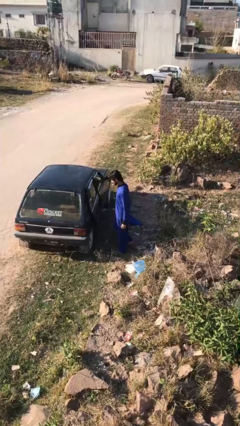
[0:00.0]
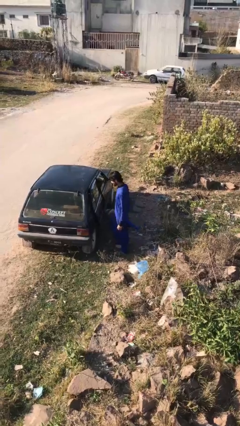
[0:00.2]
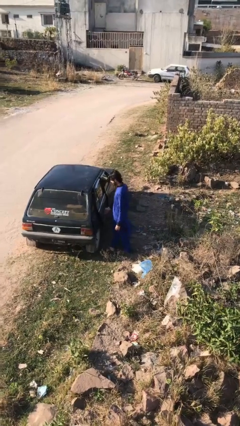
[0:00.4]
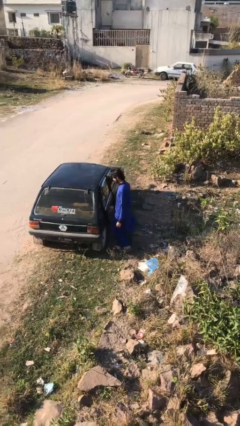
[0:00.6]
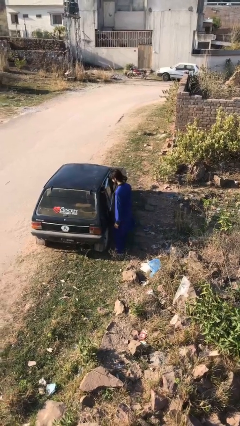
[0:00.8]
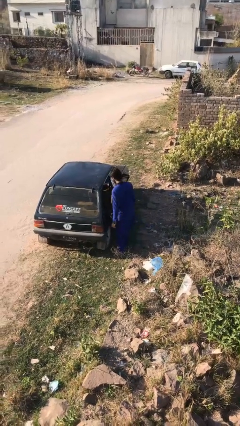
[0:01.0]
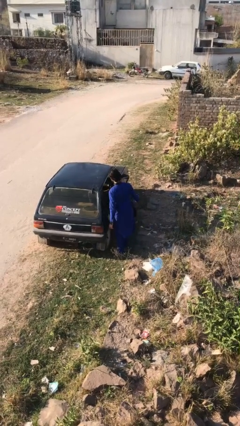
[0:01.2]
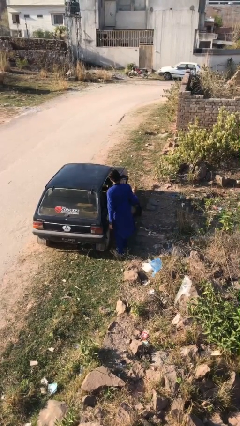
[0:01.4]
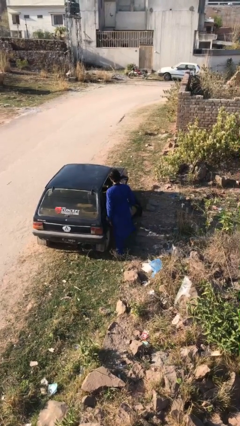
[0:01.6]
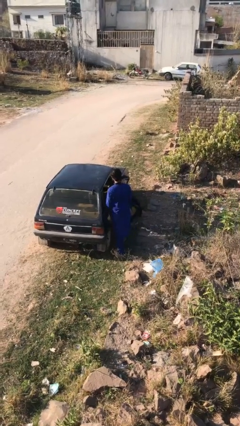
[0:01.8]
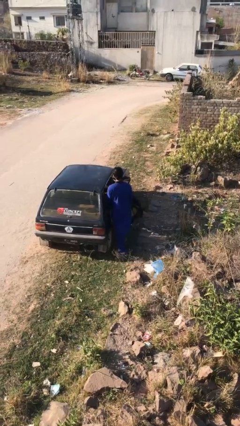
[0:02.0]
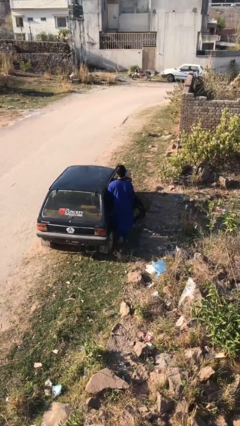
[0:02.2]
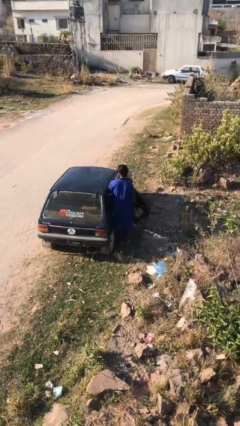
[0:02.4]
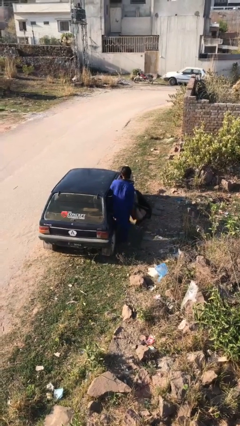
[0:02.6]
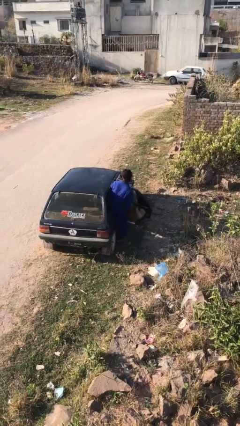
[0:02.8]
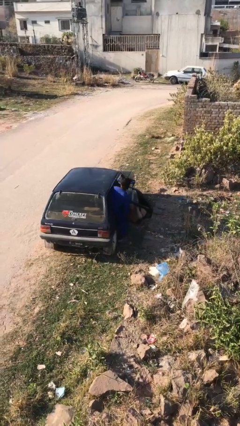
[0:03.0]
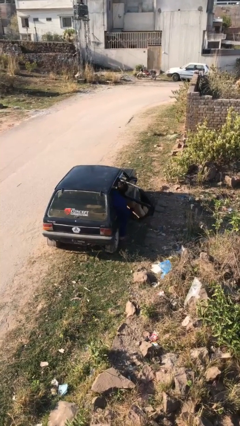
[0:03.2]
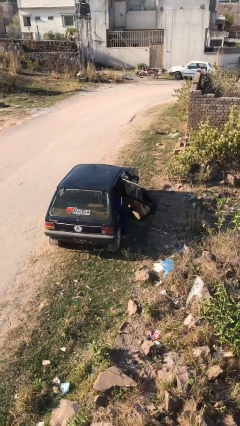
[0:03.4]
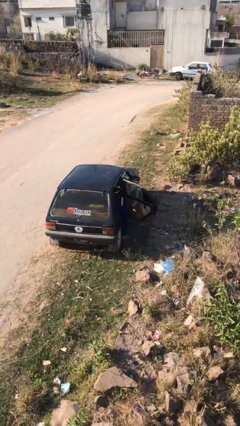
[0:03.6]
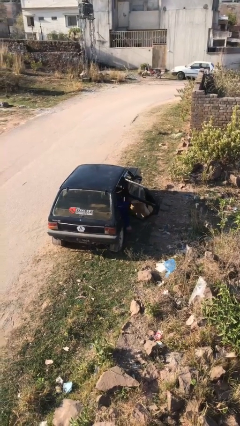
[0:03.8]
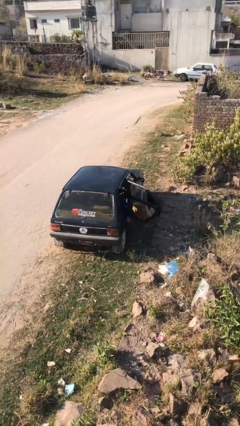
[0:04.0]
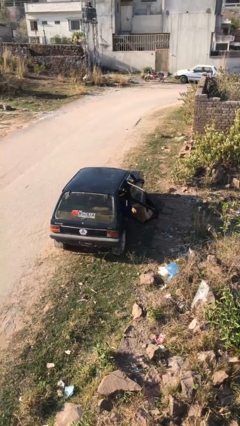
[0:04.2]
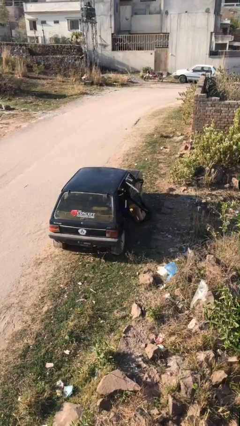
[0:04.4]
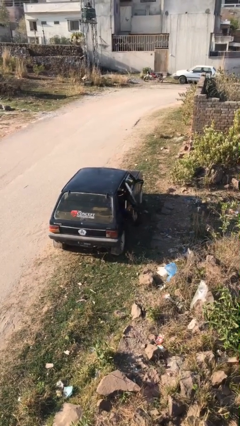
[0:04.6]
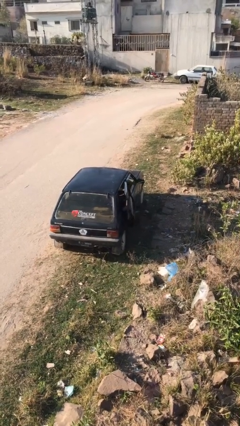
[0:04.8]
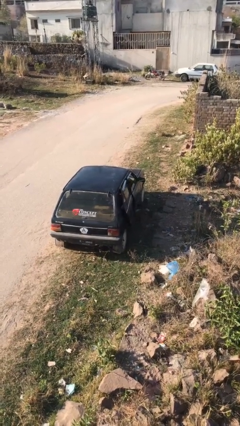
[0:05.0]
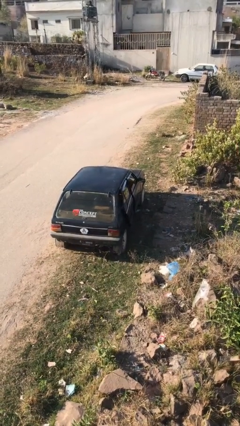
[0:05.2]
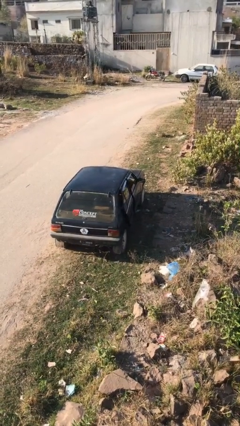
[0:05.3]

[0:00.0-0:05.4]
car picks up person

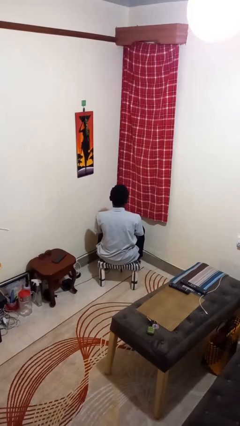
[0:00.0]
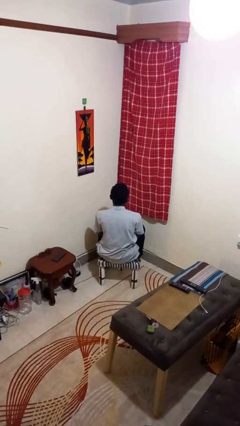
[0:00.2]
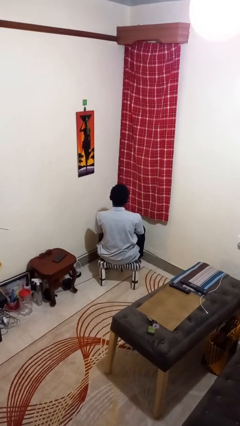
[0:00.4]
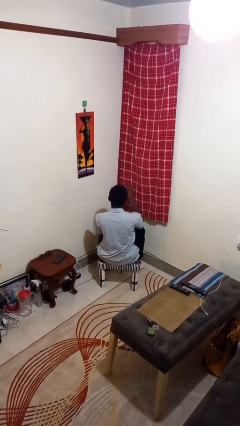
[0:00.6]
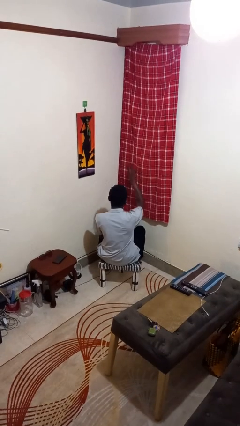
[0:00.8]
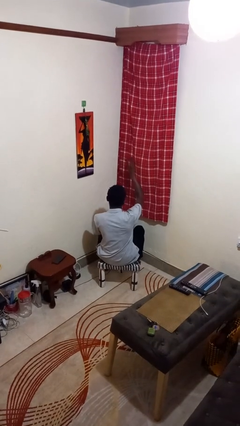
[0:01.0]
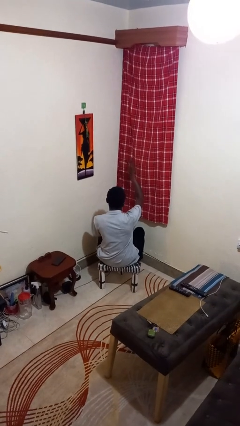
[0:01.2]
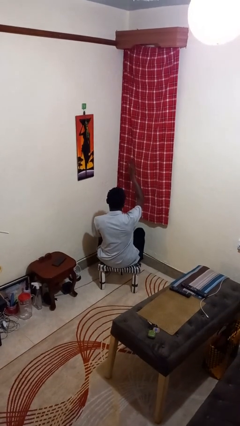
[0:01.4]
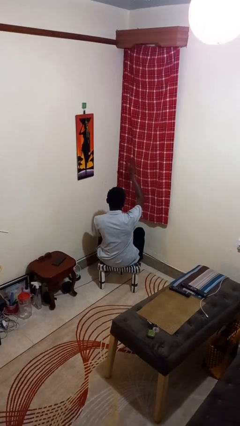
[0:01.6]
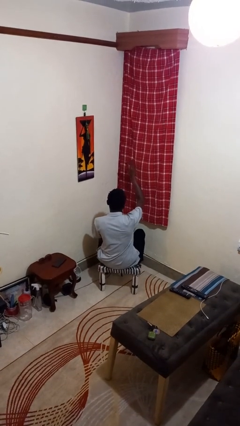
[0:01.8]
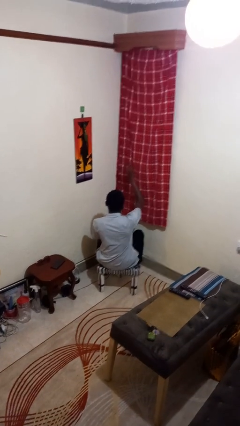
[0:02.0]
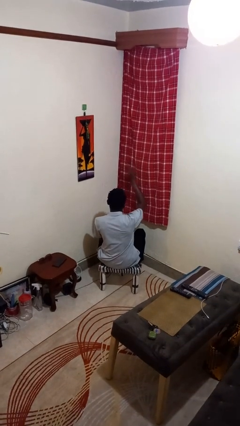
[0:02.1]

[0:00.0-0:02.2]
person gestures peace

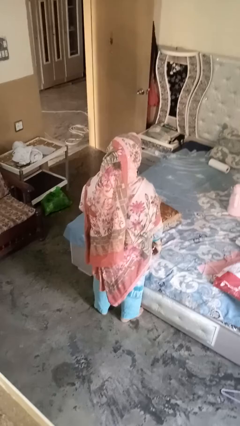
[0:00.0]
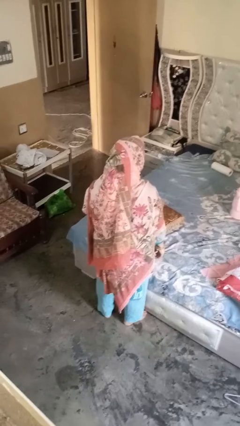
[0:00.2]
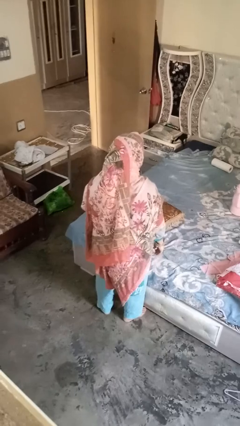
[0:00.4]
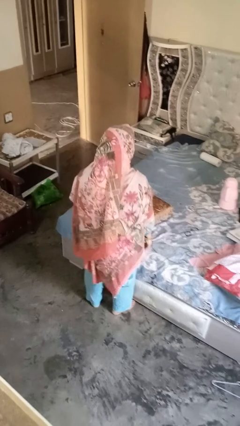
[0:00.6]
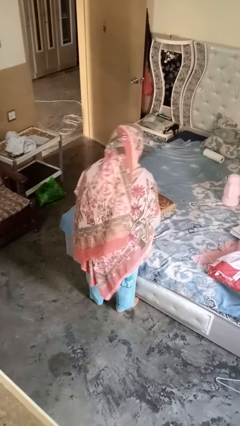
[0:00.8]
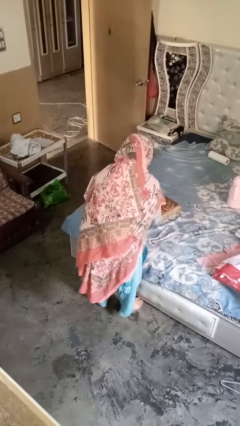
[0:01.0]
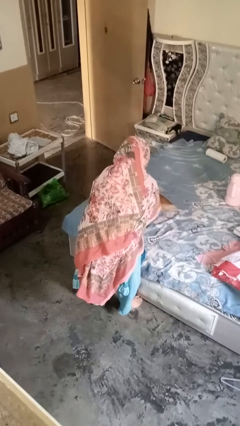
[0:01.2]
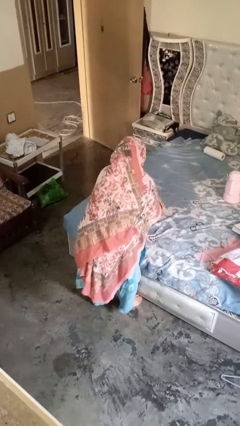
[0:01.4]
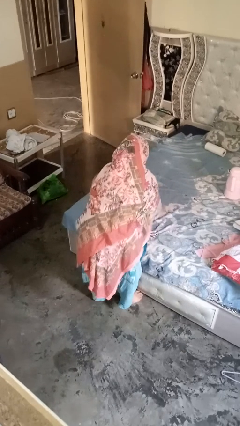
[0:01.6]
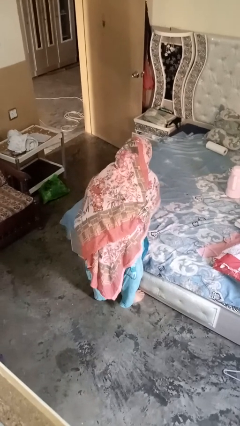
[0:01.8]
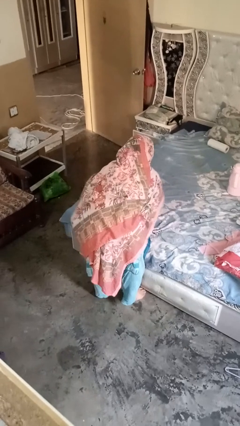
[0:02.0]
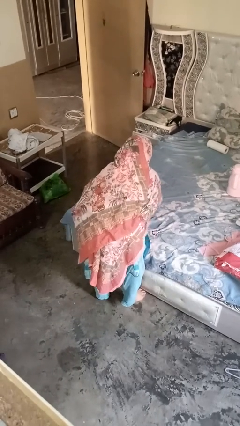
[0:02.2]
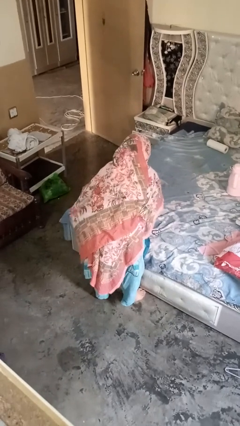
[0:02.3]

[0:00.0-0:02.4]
person searches under bed

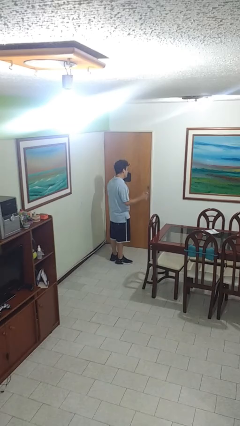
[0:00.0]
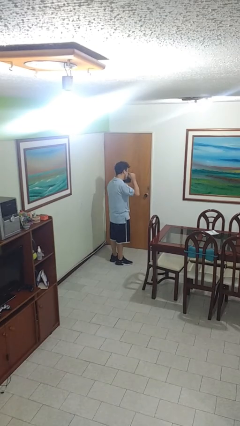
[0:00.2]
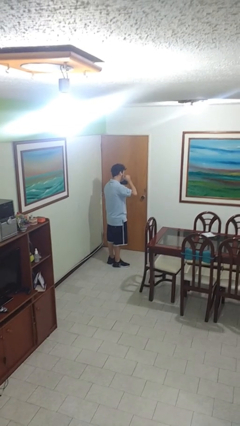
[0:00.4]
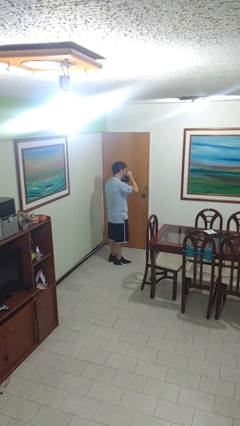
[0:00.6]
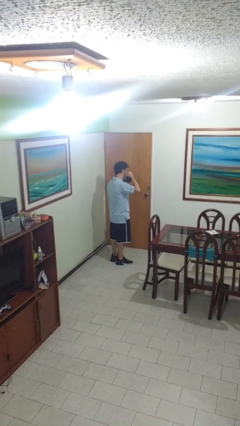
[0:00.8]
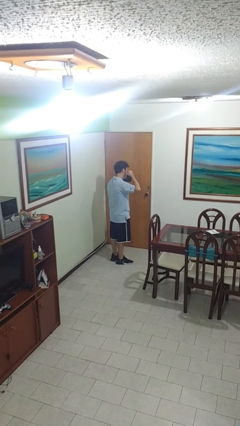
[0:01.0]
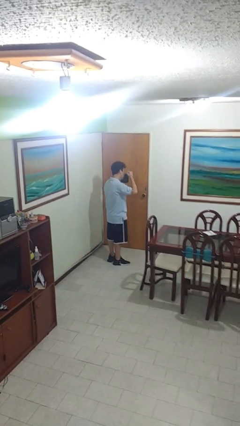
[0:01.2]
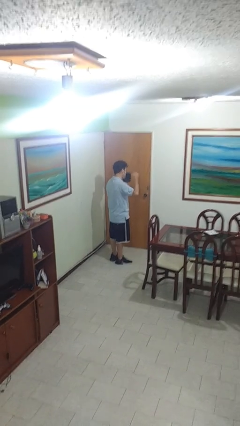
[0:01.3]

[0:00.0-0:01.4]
person gestures listen closely

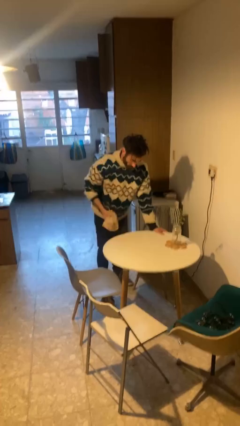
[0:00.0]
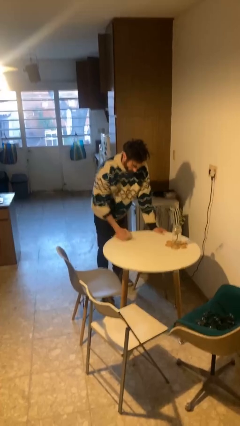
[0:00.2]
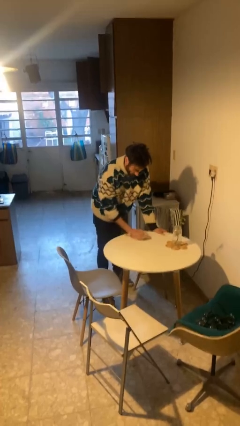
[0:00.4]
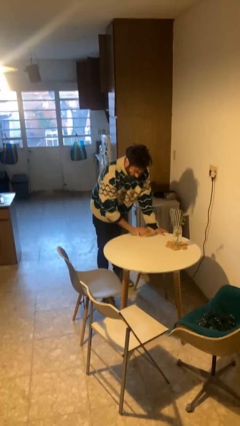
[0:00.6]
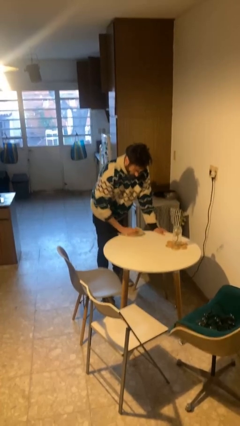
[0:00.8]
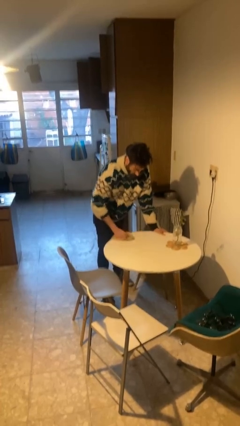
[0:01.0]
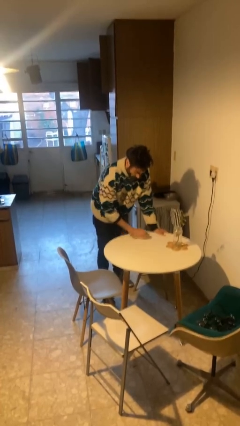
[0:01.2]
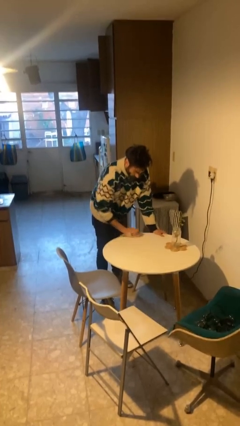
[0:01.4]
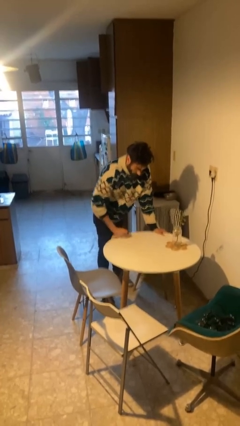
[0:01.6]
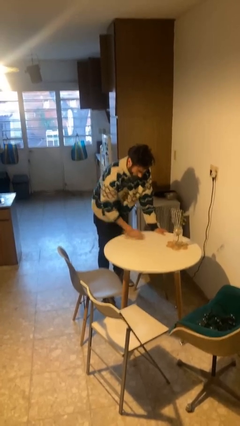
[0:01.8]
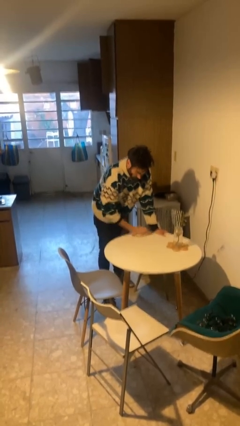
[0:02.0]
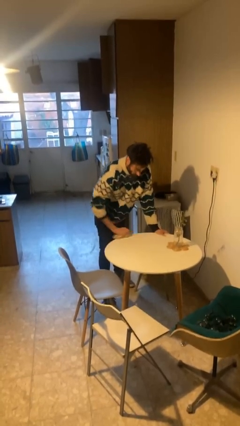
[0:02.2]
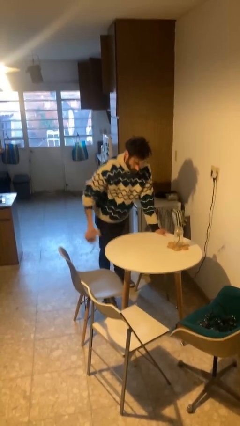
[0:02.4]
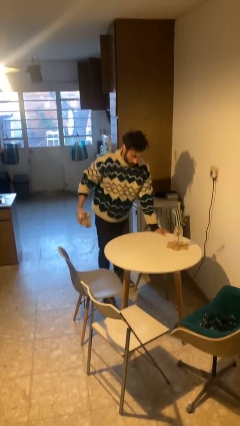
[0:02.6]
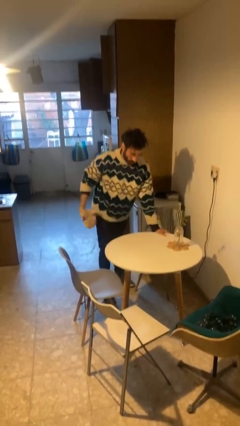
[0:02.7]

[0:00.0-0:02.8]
person cleans table with rag

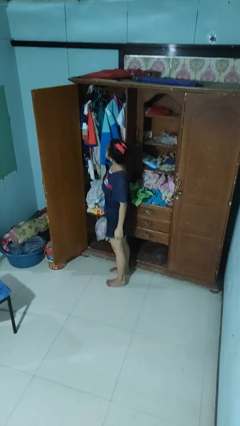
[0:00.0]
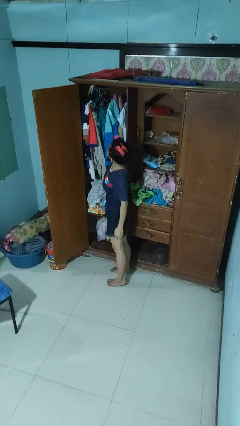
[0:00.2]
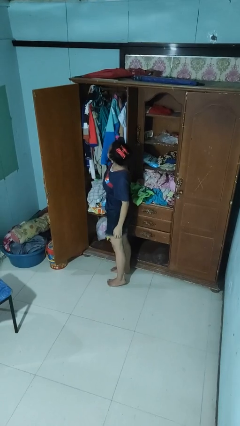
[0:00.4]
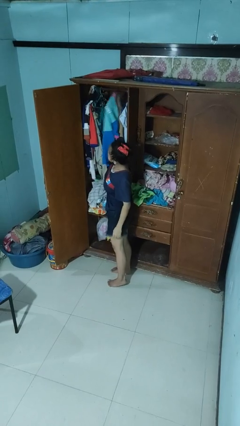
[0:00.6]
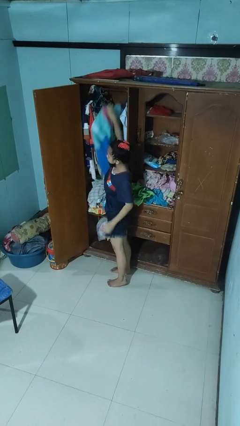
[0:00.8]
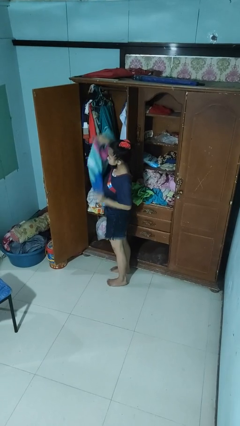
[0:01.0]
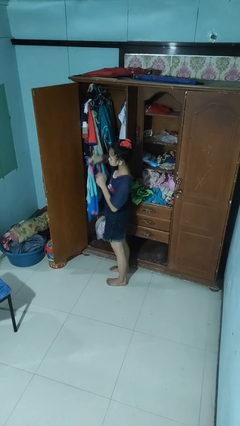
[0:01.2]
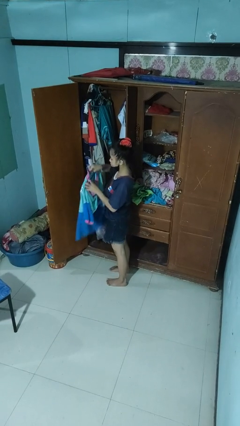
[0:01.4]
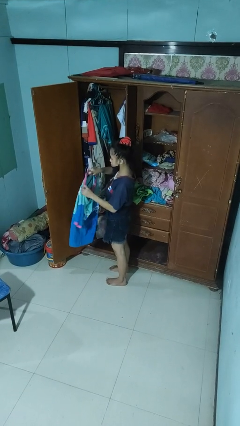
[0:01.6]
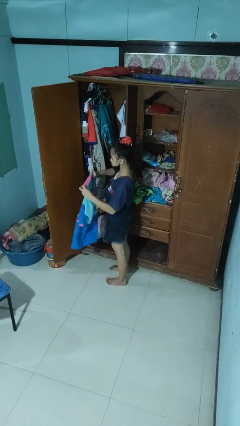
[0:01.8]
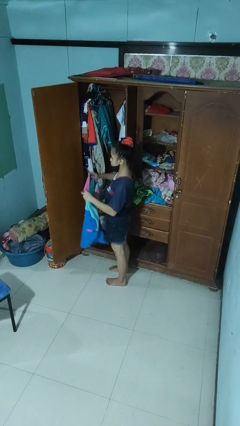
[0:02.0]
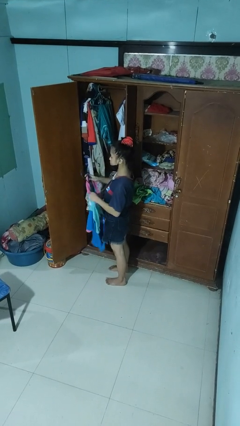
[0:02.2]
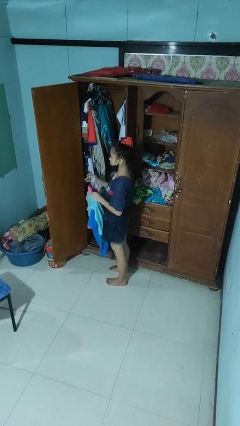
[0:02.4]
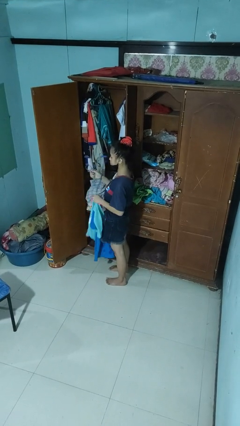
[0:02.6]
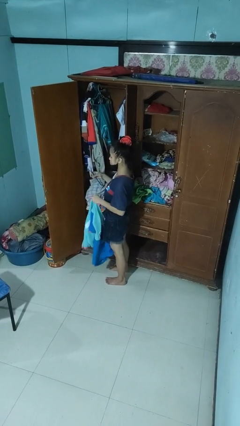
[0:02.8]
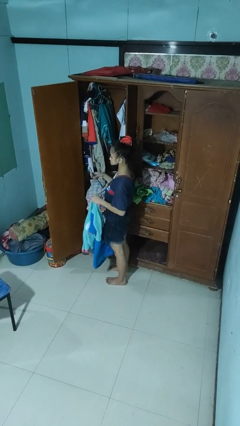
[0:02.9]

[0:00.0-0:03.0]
person takes clothes from closet

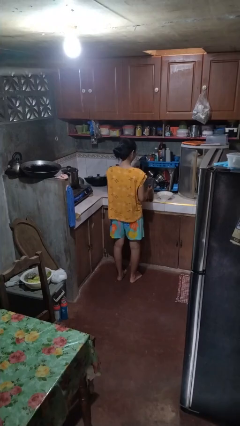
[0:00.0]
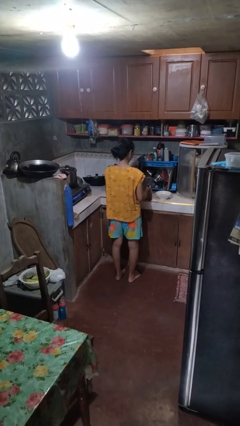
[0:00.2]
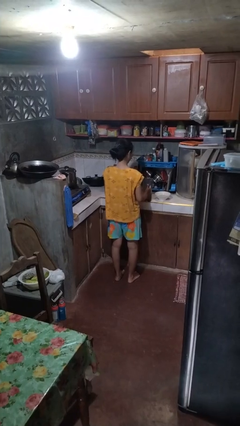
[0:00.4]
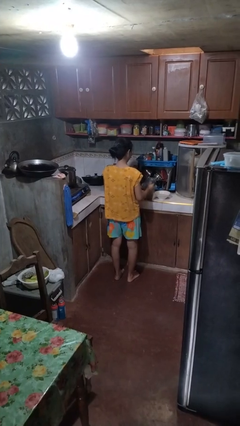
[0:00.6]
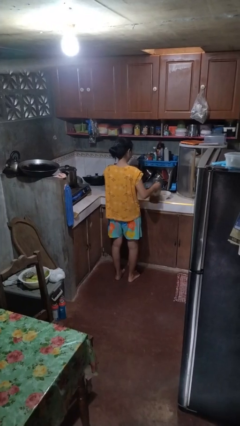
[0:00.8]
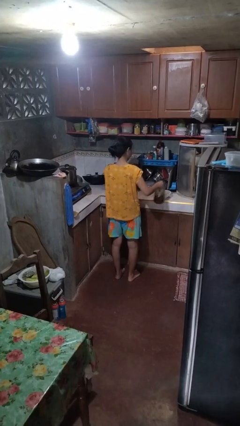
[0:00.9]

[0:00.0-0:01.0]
person pours into bowl
